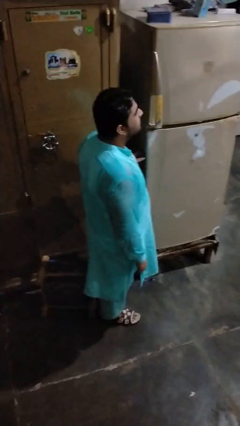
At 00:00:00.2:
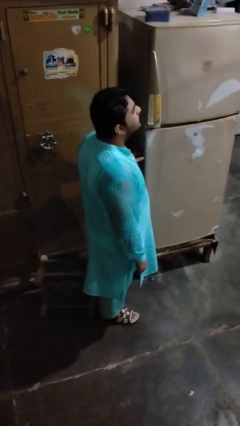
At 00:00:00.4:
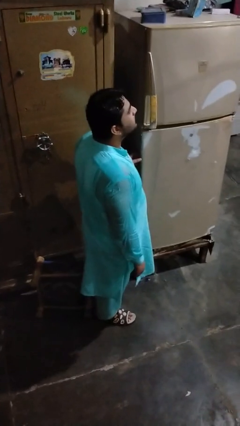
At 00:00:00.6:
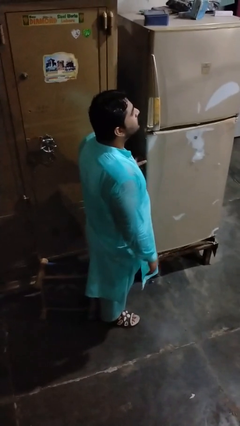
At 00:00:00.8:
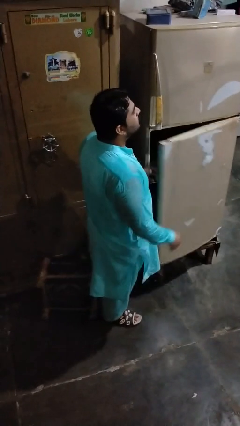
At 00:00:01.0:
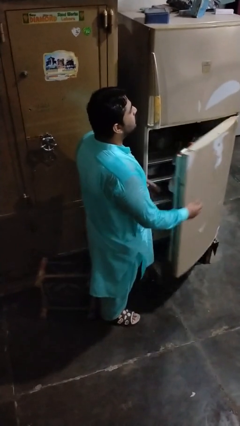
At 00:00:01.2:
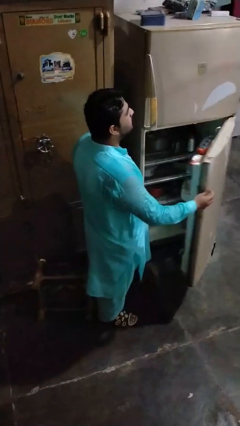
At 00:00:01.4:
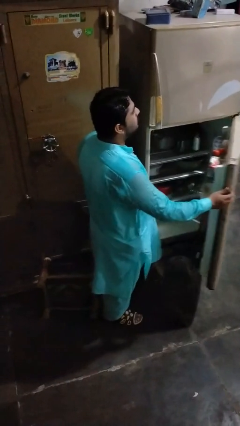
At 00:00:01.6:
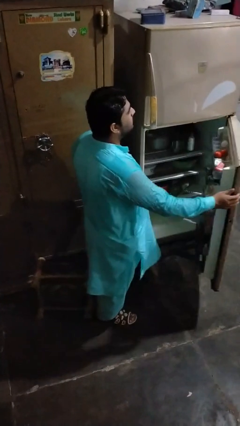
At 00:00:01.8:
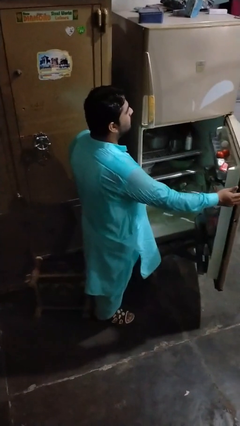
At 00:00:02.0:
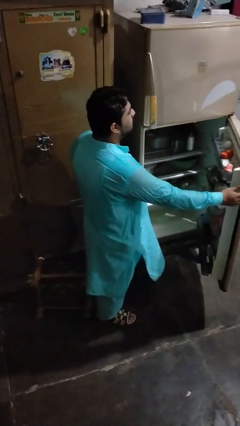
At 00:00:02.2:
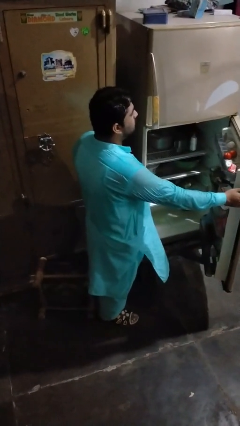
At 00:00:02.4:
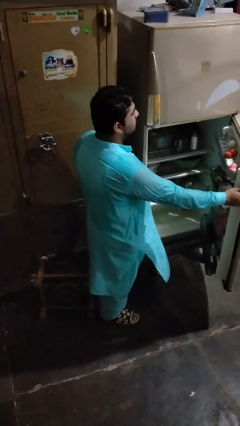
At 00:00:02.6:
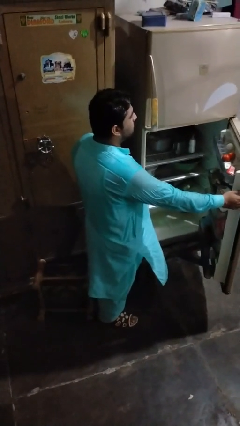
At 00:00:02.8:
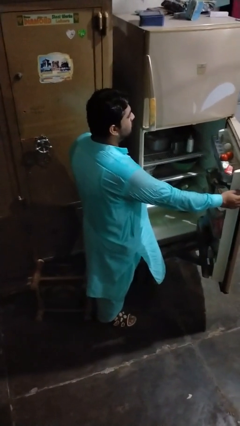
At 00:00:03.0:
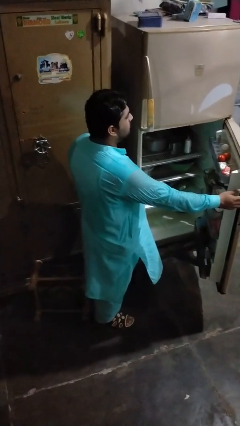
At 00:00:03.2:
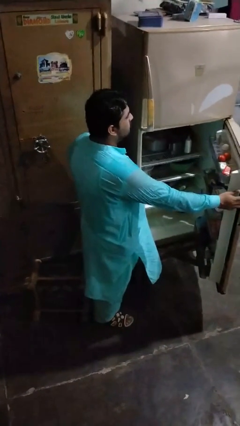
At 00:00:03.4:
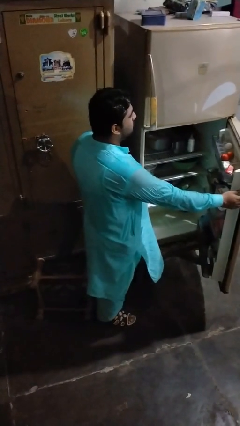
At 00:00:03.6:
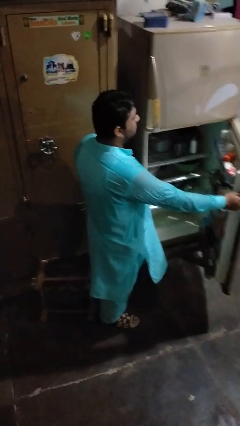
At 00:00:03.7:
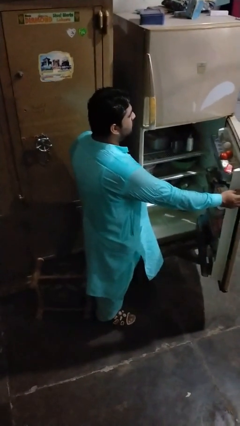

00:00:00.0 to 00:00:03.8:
person opens refrigerator

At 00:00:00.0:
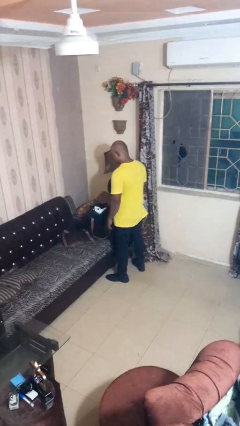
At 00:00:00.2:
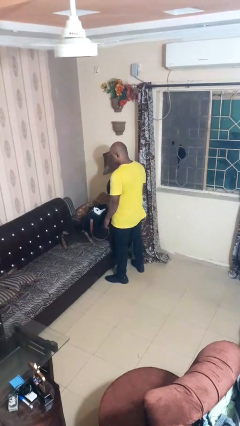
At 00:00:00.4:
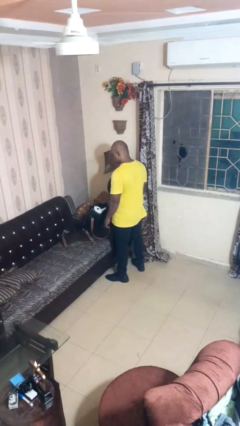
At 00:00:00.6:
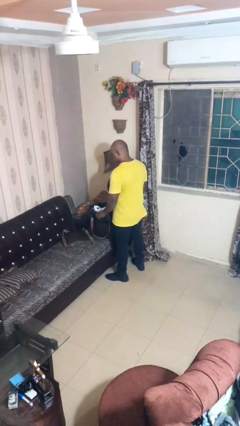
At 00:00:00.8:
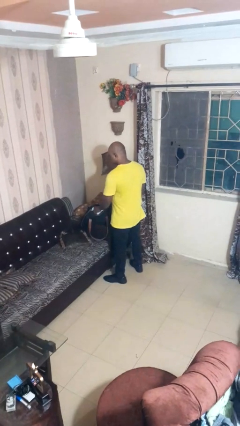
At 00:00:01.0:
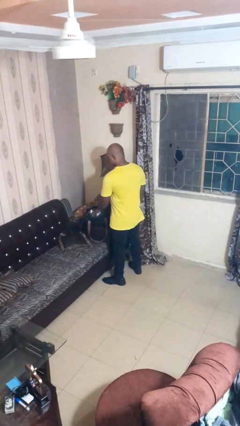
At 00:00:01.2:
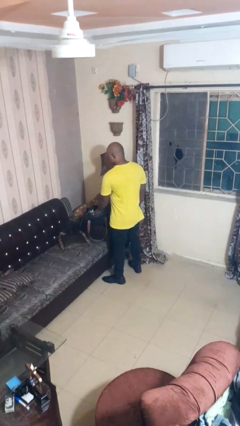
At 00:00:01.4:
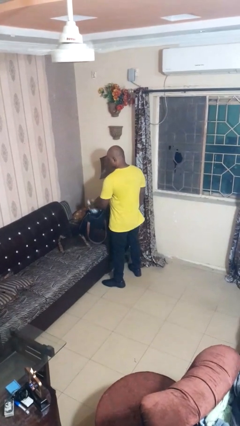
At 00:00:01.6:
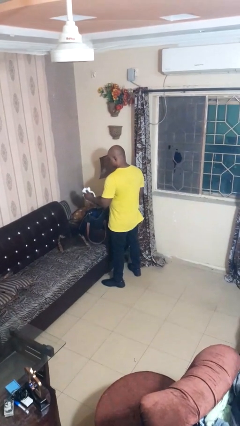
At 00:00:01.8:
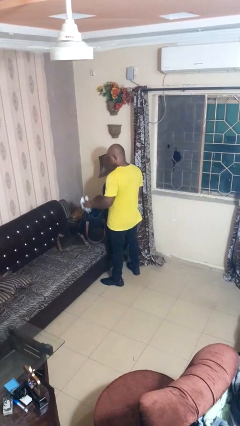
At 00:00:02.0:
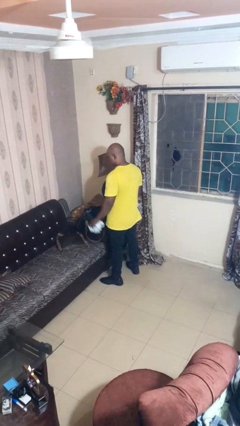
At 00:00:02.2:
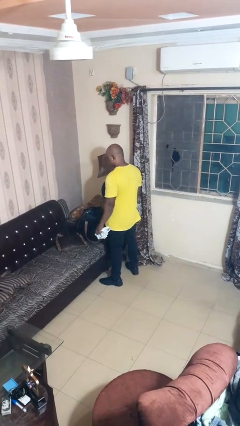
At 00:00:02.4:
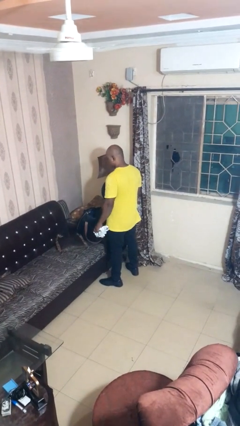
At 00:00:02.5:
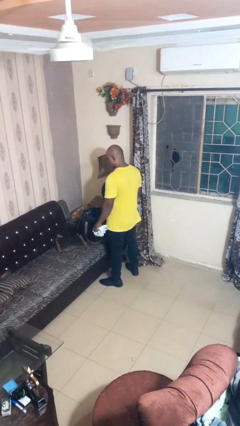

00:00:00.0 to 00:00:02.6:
person takes object from bag

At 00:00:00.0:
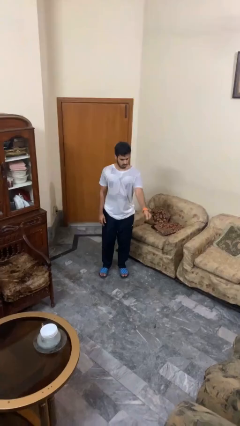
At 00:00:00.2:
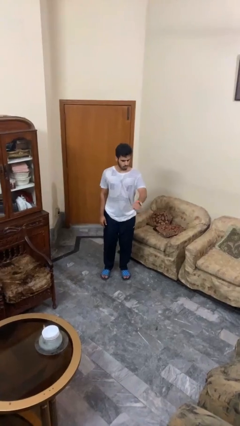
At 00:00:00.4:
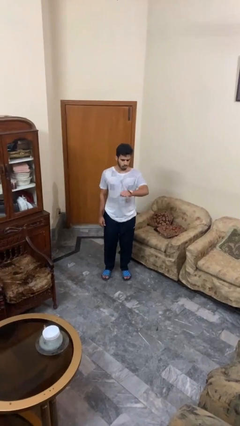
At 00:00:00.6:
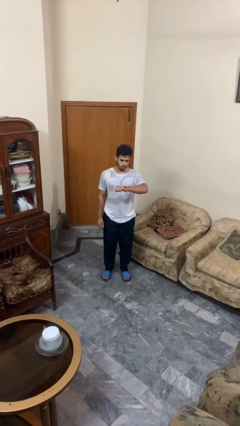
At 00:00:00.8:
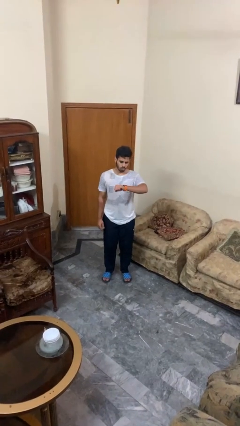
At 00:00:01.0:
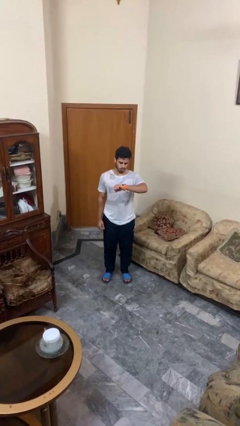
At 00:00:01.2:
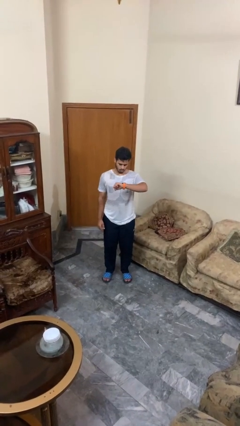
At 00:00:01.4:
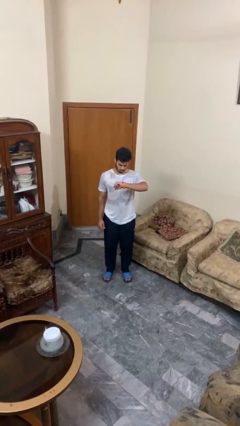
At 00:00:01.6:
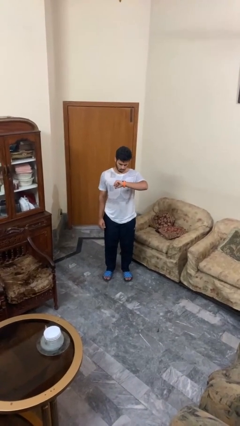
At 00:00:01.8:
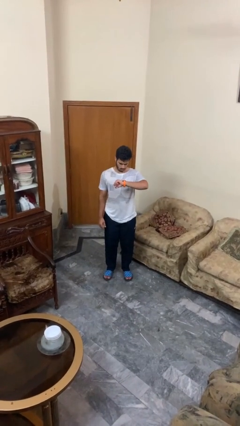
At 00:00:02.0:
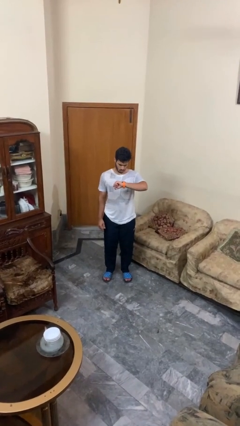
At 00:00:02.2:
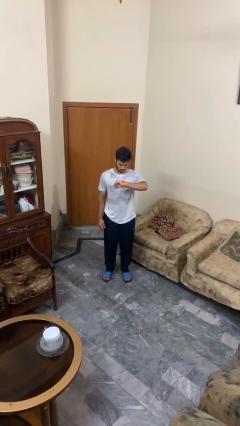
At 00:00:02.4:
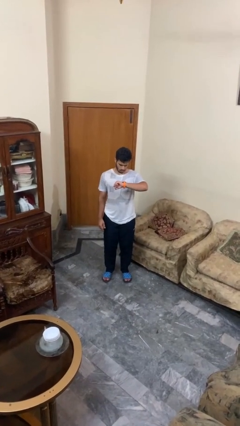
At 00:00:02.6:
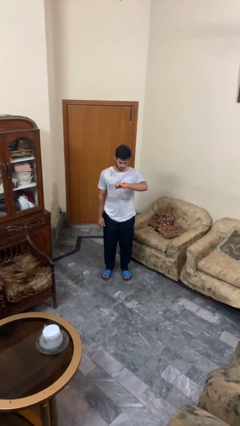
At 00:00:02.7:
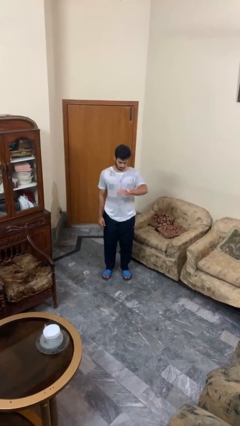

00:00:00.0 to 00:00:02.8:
person looks at wristwatch

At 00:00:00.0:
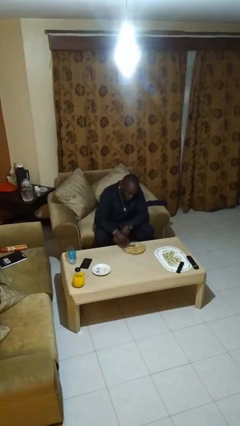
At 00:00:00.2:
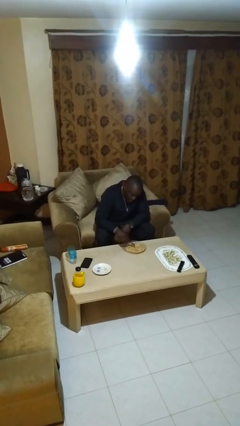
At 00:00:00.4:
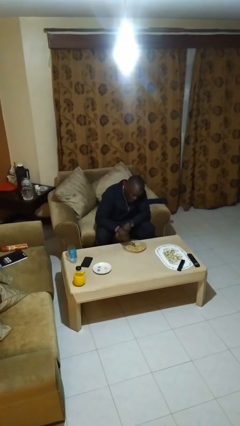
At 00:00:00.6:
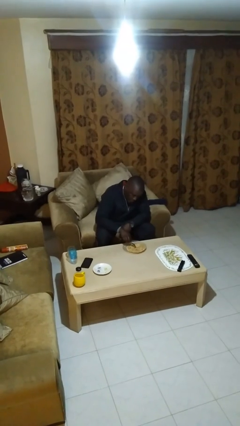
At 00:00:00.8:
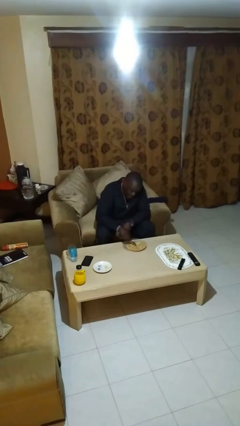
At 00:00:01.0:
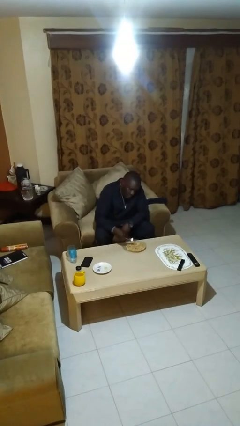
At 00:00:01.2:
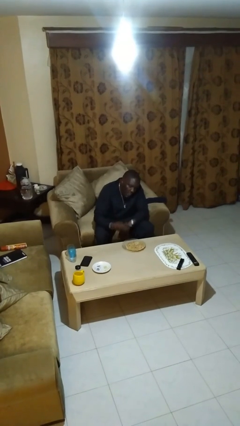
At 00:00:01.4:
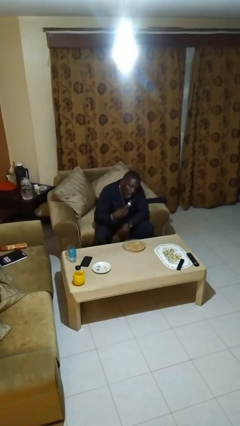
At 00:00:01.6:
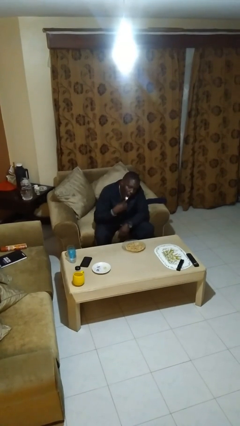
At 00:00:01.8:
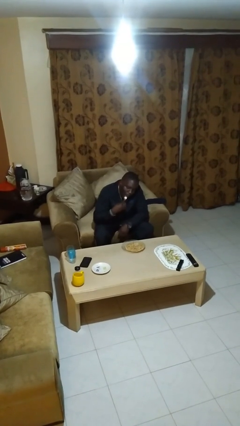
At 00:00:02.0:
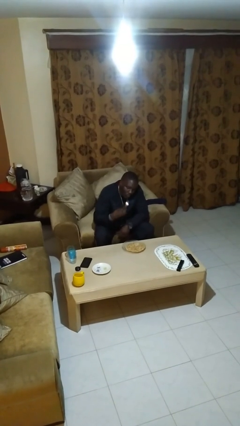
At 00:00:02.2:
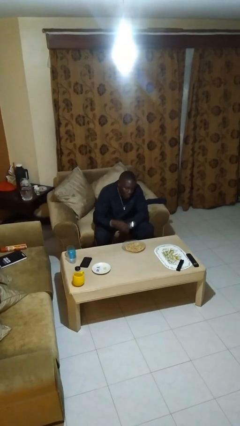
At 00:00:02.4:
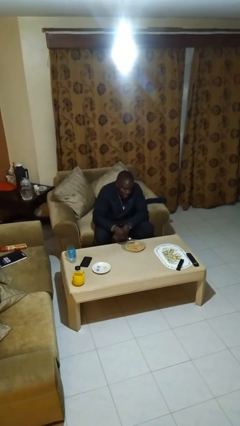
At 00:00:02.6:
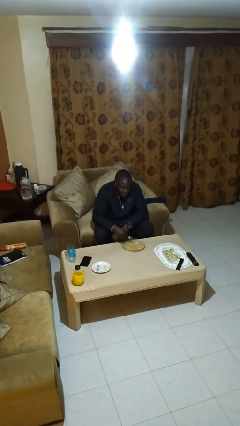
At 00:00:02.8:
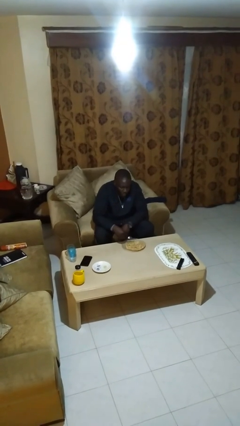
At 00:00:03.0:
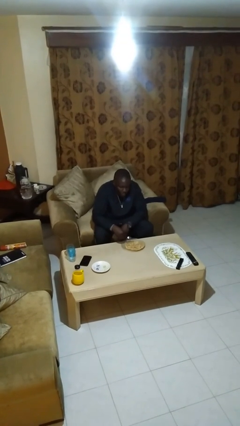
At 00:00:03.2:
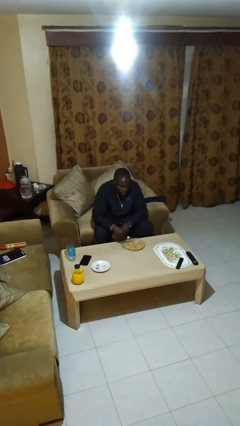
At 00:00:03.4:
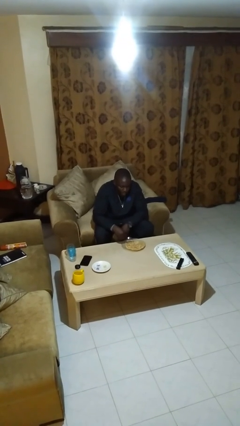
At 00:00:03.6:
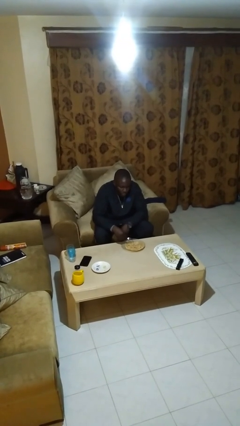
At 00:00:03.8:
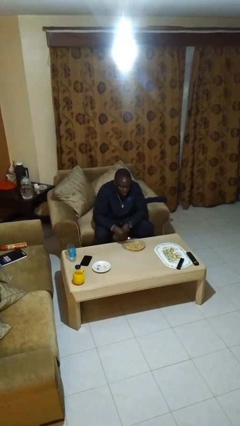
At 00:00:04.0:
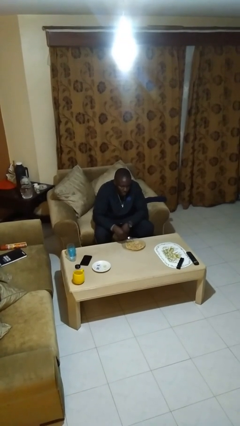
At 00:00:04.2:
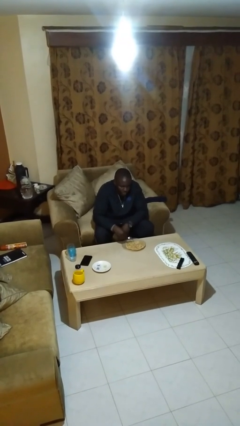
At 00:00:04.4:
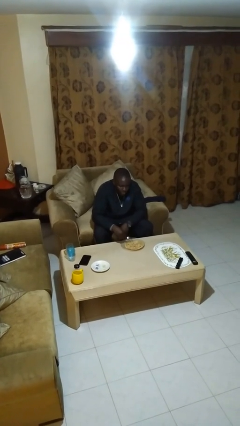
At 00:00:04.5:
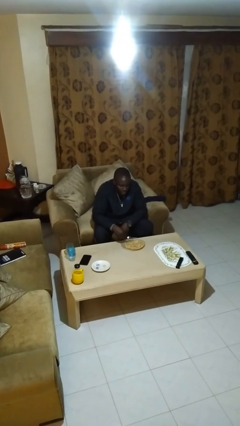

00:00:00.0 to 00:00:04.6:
person eats with utensil

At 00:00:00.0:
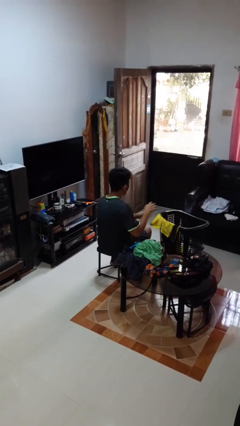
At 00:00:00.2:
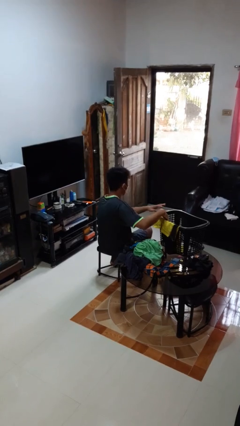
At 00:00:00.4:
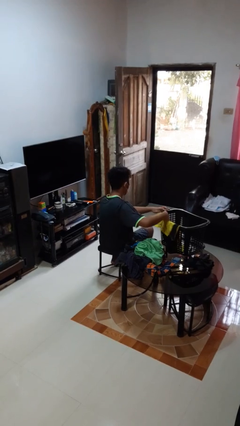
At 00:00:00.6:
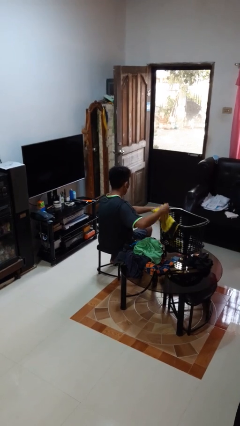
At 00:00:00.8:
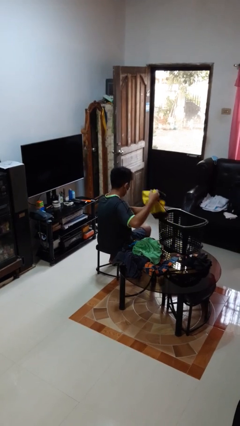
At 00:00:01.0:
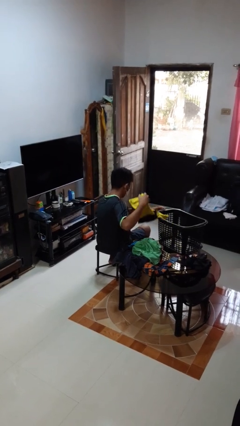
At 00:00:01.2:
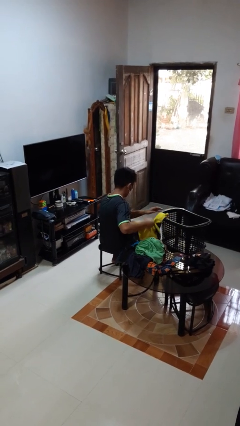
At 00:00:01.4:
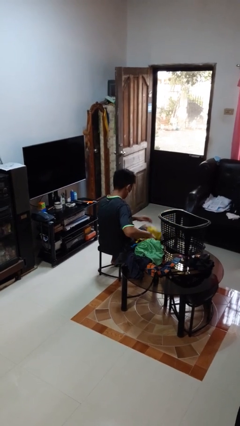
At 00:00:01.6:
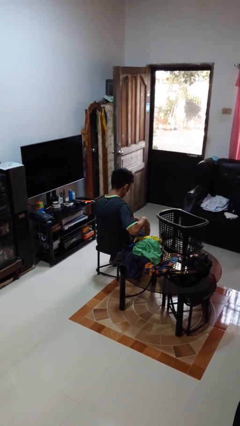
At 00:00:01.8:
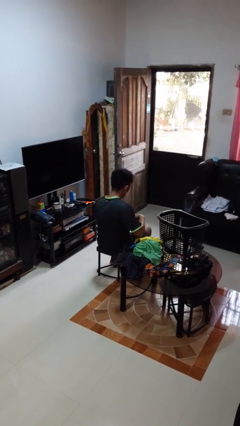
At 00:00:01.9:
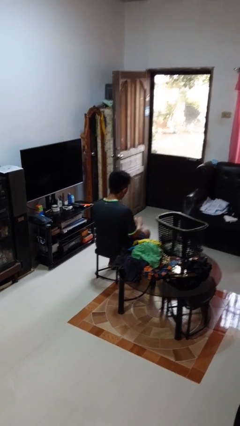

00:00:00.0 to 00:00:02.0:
person takes object from basket

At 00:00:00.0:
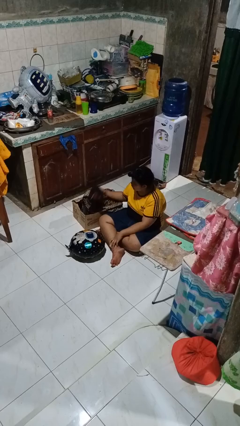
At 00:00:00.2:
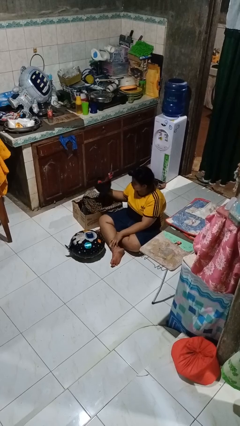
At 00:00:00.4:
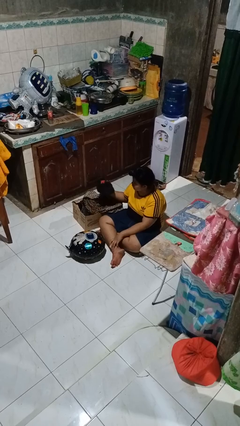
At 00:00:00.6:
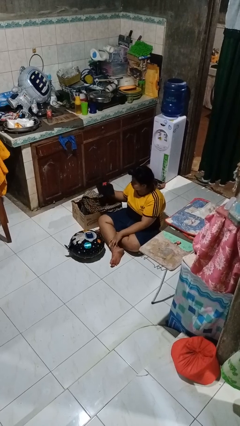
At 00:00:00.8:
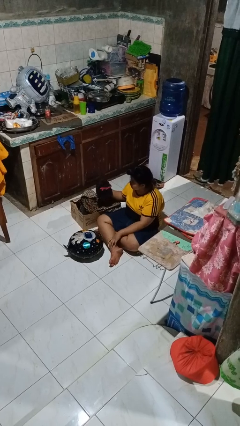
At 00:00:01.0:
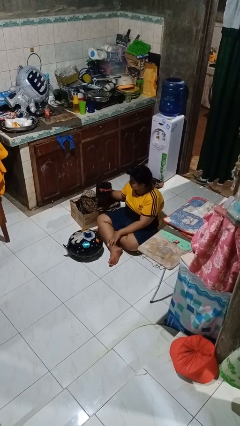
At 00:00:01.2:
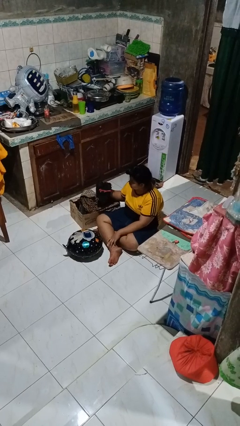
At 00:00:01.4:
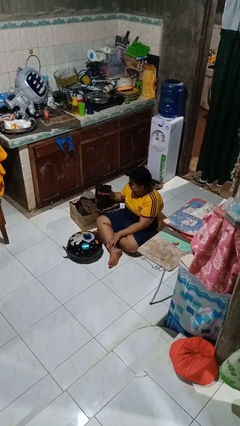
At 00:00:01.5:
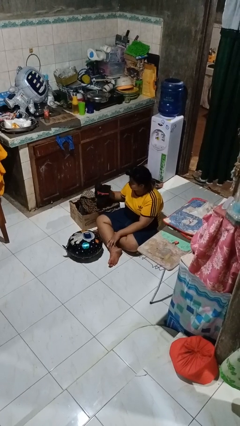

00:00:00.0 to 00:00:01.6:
person takes object from box
